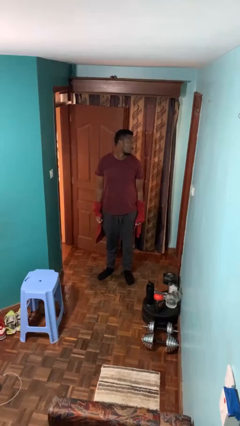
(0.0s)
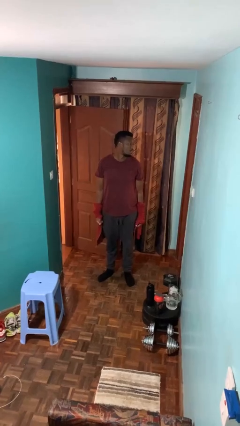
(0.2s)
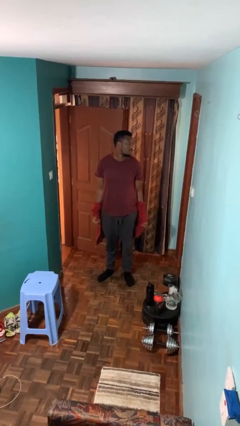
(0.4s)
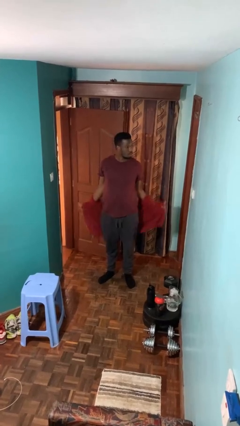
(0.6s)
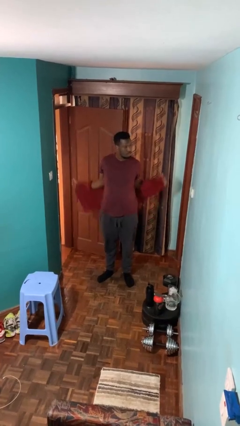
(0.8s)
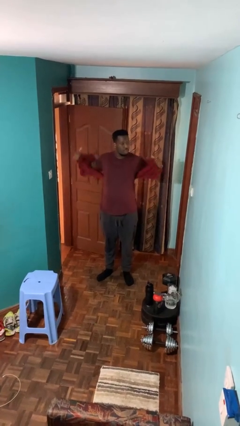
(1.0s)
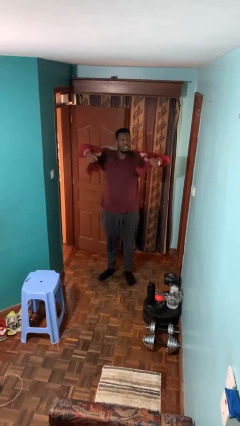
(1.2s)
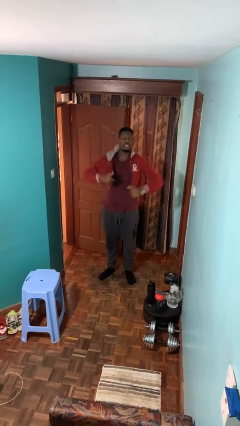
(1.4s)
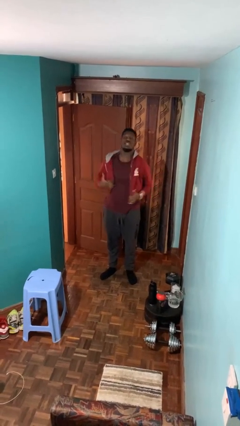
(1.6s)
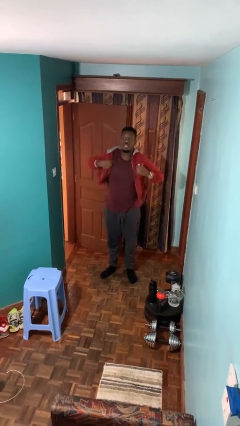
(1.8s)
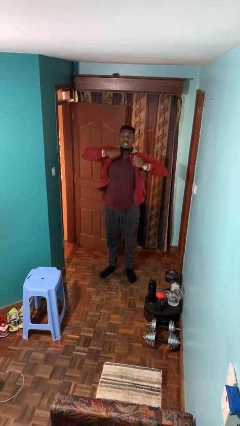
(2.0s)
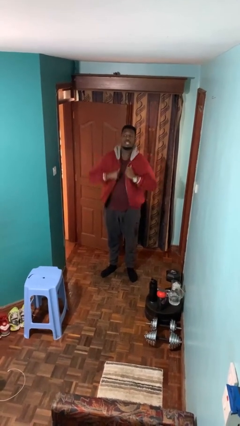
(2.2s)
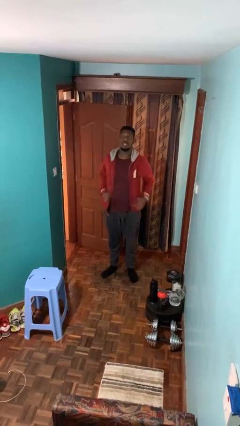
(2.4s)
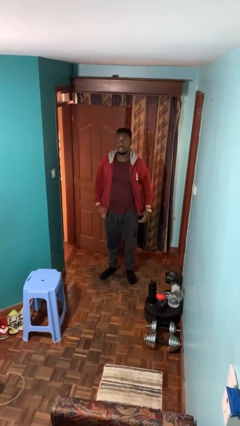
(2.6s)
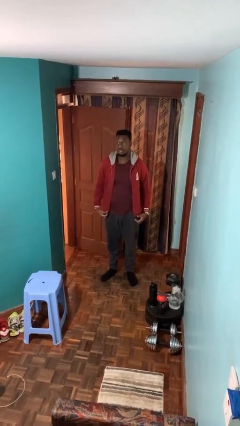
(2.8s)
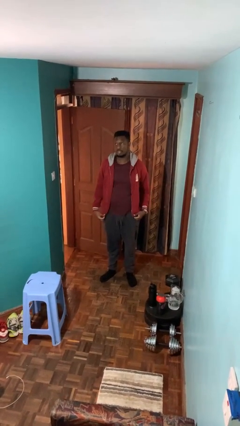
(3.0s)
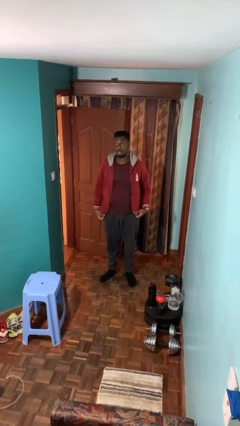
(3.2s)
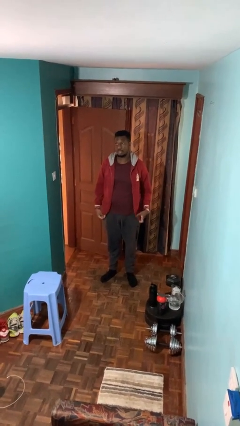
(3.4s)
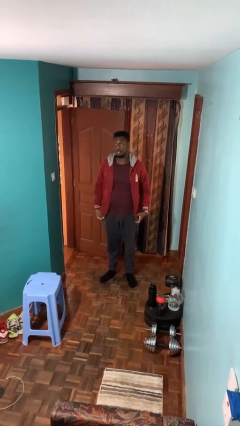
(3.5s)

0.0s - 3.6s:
person puts on jacket

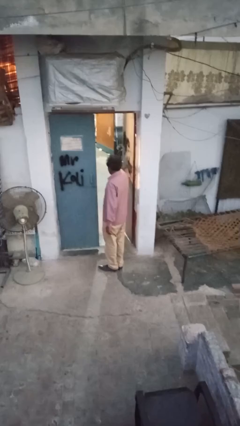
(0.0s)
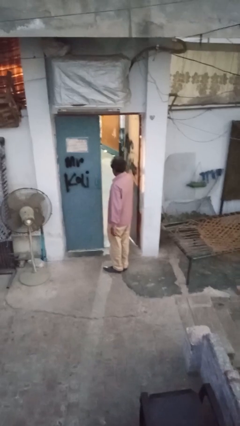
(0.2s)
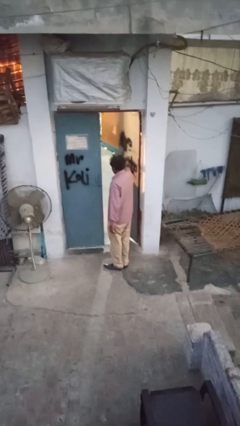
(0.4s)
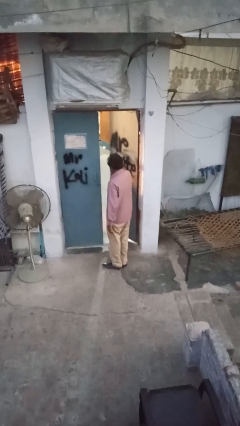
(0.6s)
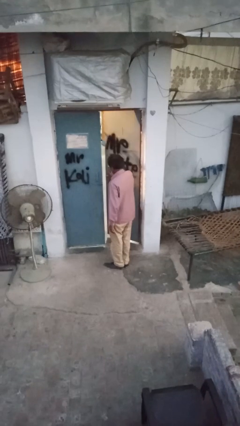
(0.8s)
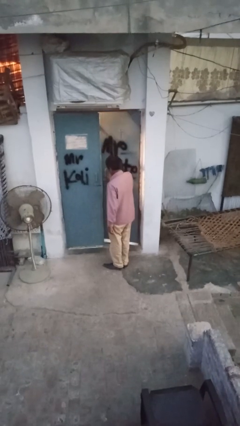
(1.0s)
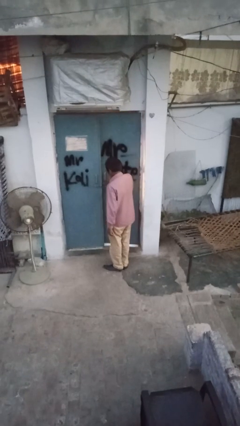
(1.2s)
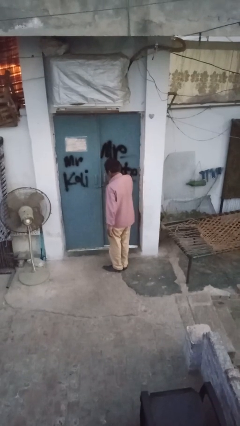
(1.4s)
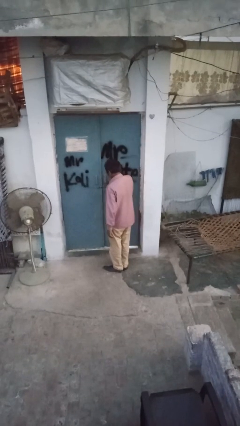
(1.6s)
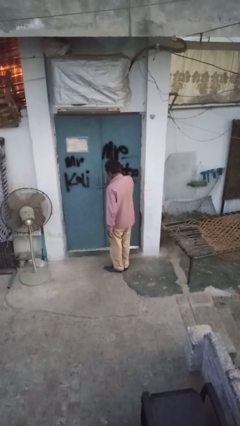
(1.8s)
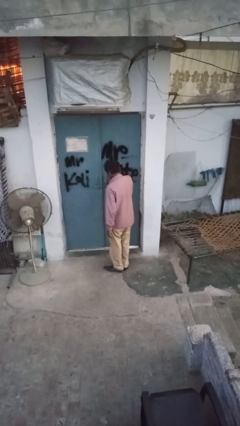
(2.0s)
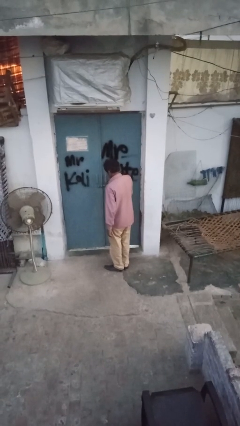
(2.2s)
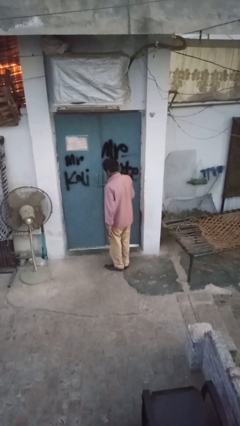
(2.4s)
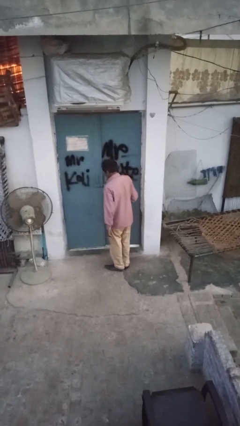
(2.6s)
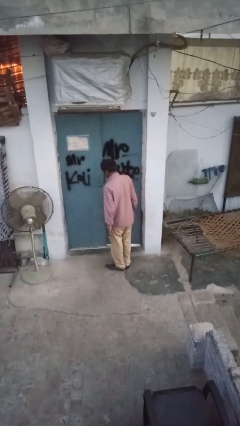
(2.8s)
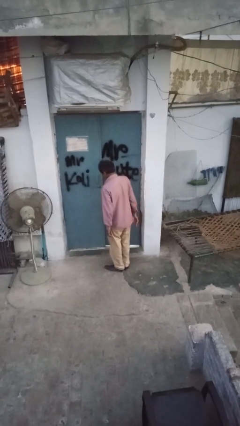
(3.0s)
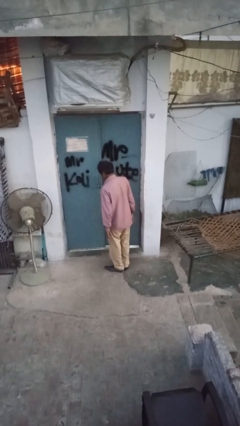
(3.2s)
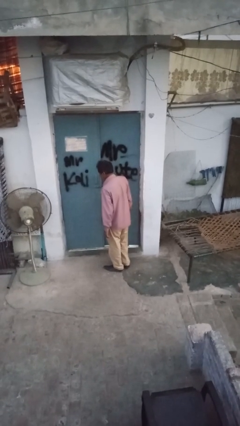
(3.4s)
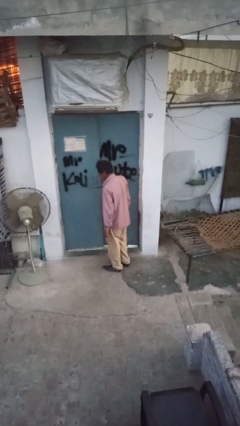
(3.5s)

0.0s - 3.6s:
person closes facility door

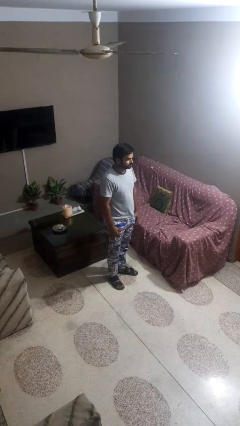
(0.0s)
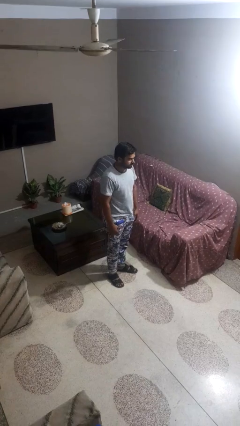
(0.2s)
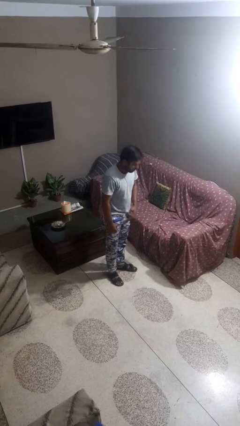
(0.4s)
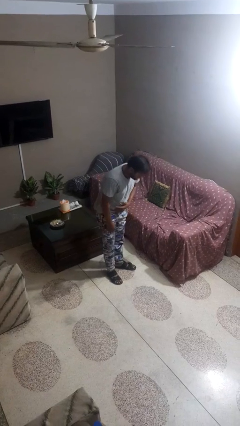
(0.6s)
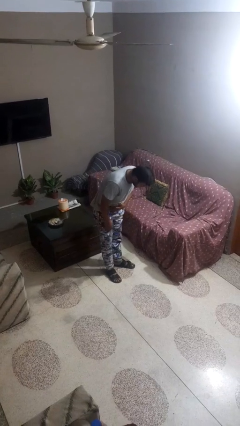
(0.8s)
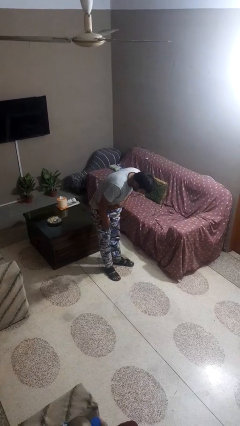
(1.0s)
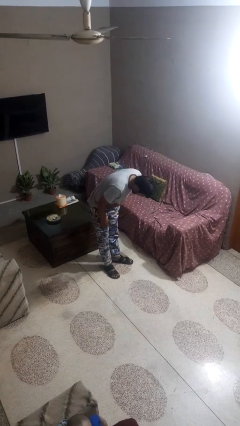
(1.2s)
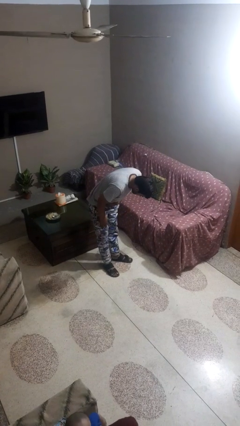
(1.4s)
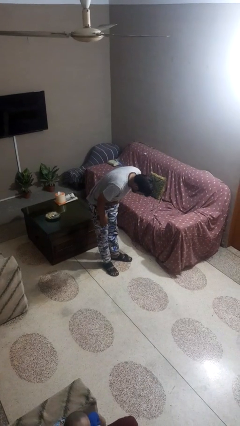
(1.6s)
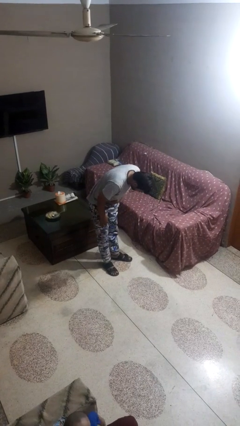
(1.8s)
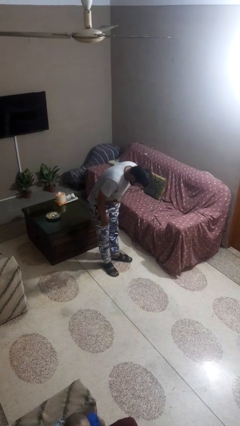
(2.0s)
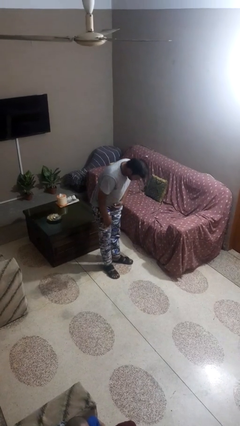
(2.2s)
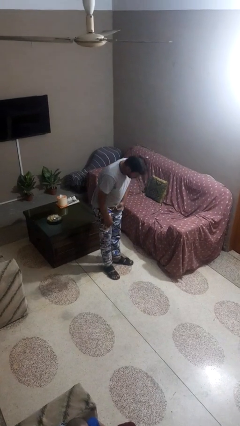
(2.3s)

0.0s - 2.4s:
person bows

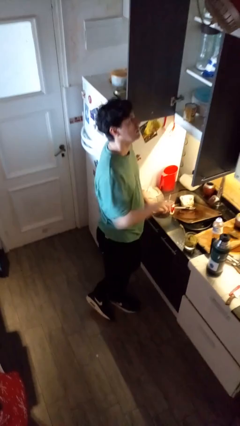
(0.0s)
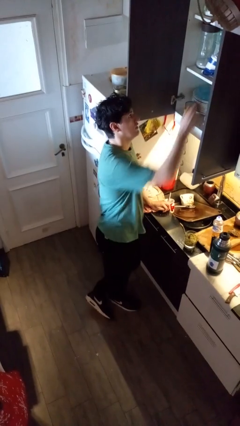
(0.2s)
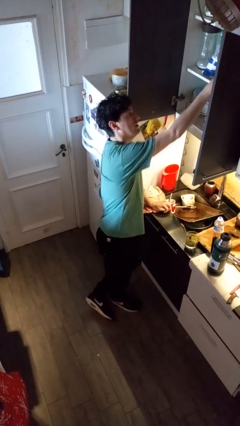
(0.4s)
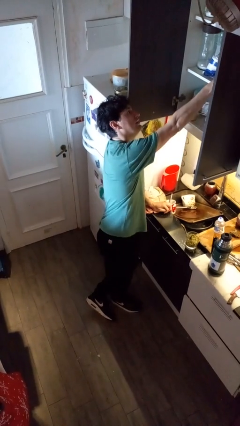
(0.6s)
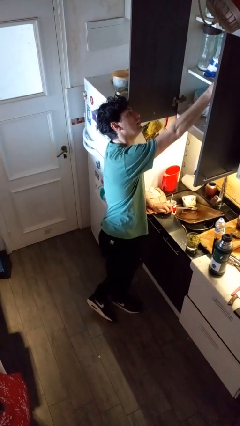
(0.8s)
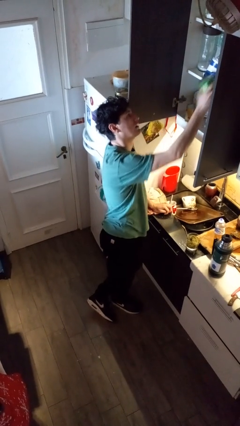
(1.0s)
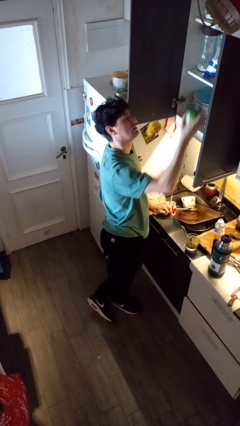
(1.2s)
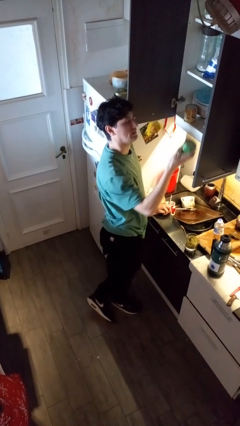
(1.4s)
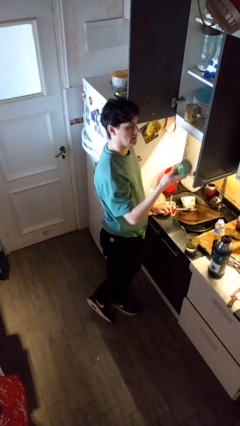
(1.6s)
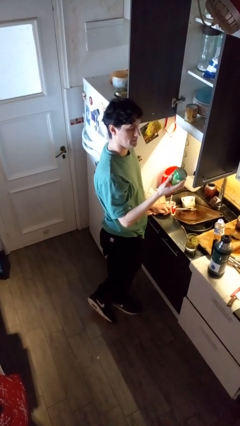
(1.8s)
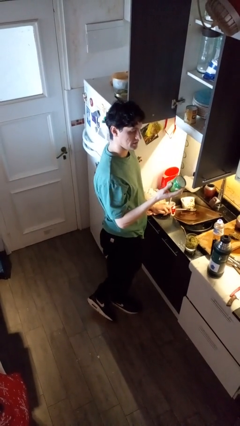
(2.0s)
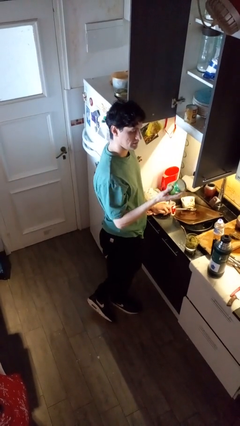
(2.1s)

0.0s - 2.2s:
person takes object from kitchen drawer

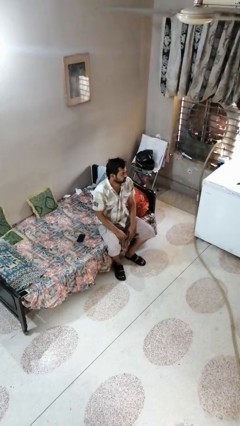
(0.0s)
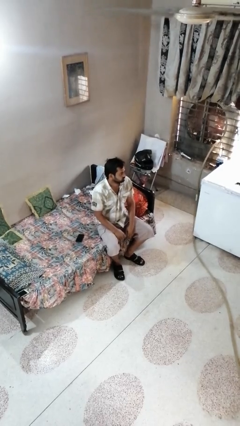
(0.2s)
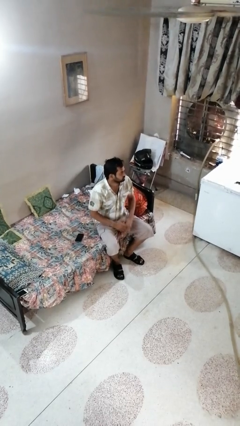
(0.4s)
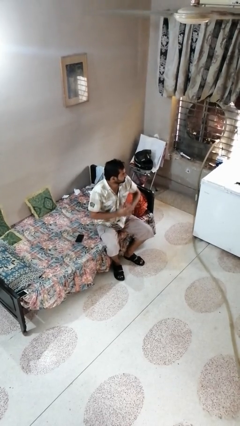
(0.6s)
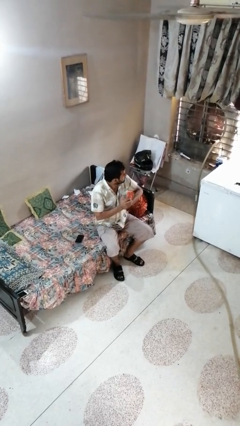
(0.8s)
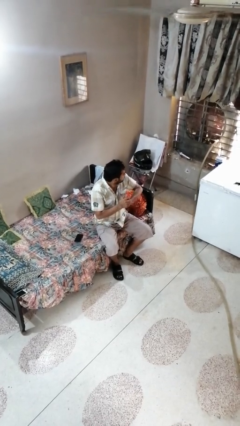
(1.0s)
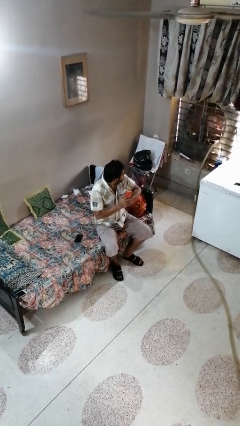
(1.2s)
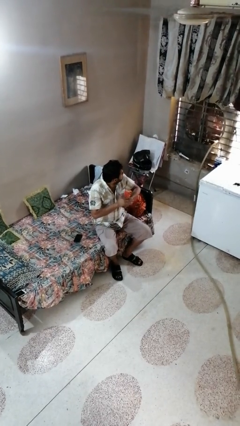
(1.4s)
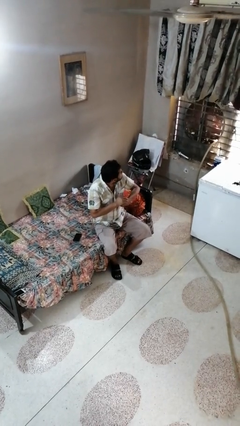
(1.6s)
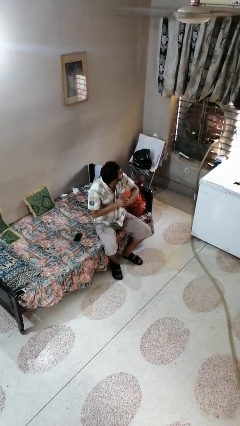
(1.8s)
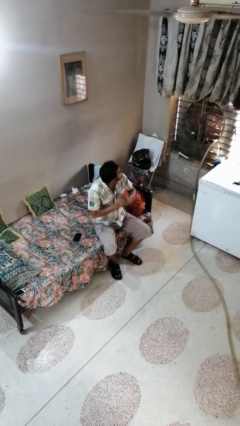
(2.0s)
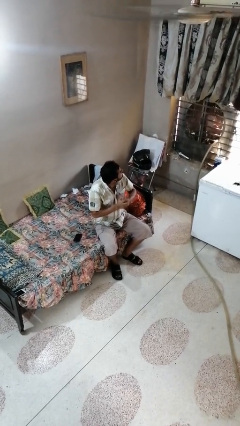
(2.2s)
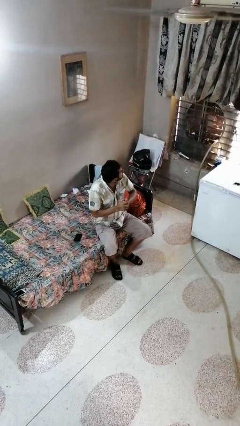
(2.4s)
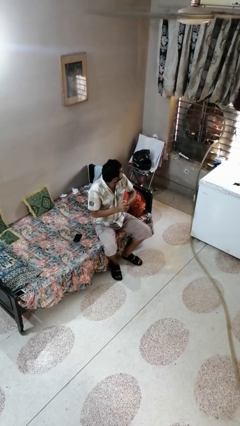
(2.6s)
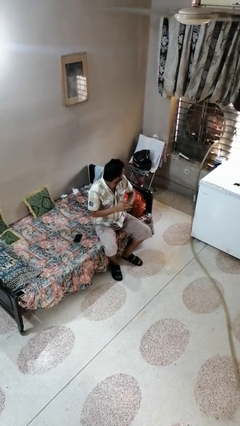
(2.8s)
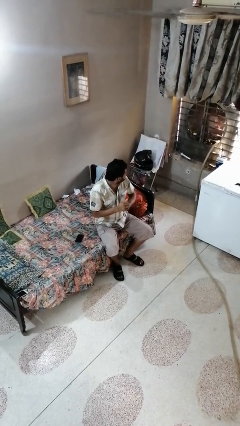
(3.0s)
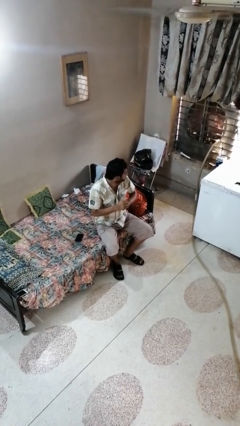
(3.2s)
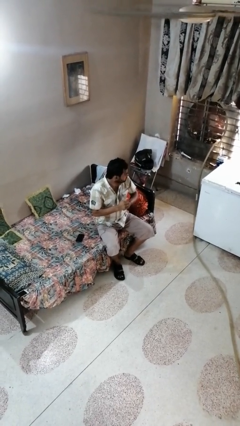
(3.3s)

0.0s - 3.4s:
person cracks knuckles

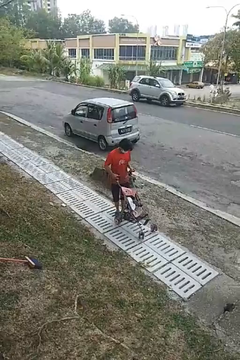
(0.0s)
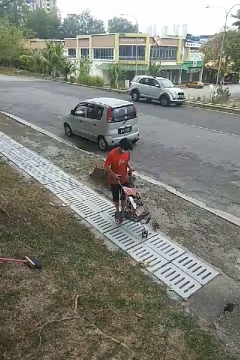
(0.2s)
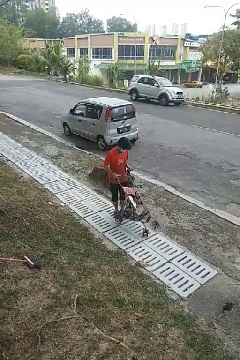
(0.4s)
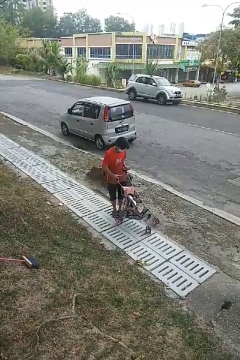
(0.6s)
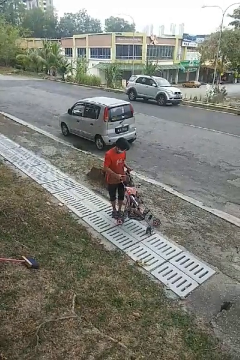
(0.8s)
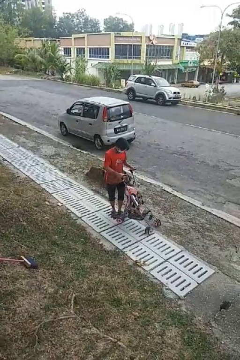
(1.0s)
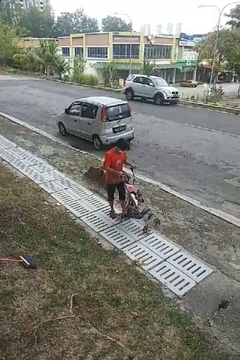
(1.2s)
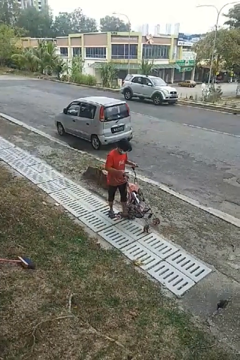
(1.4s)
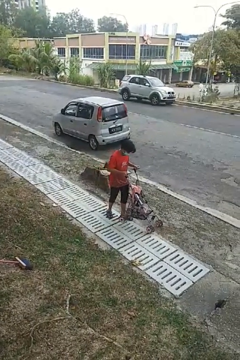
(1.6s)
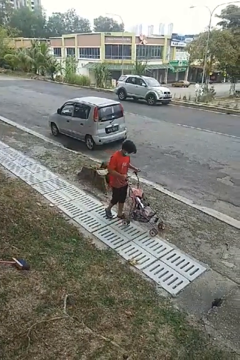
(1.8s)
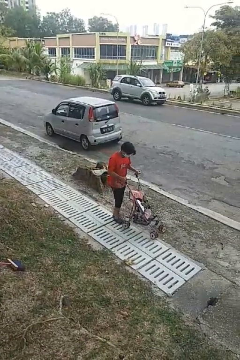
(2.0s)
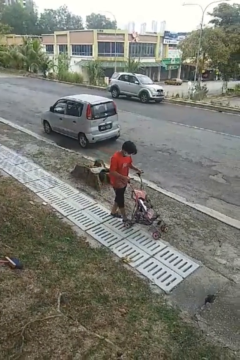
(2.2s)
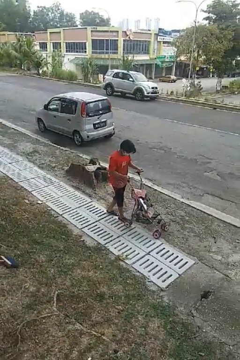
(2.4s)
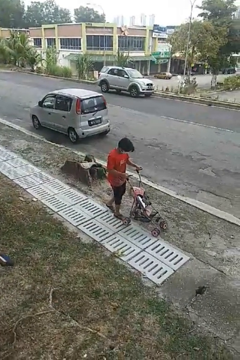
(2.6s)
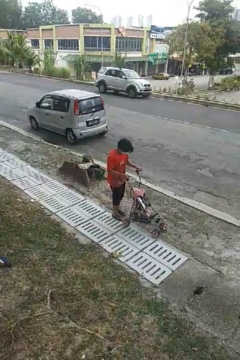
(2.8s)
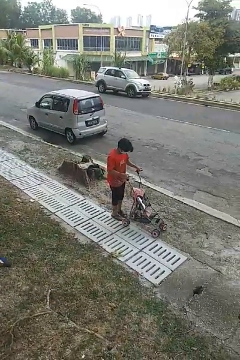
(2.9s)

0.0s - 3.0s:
person pushes wheeled cart
